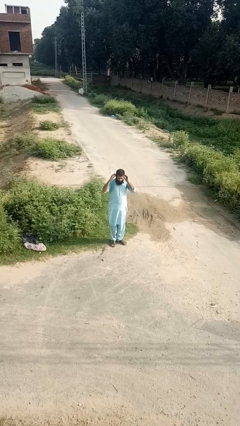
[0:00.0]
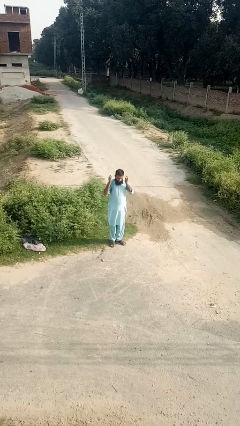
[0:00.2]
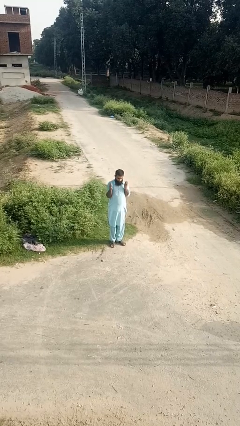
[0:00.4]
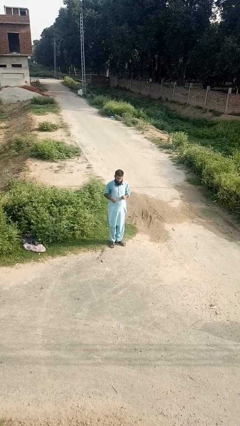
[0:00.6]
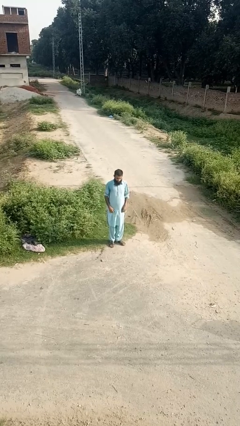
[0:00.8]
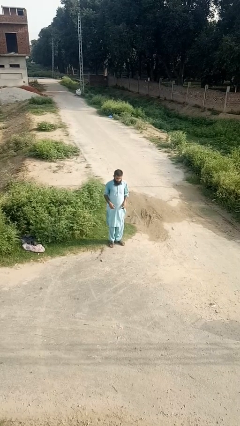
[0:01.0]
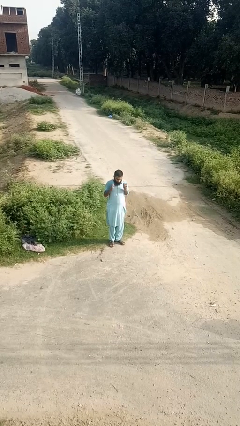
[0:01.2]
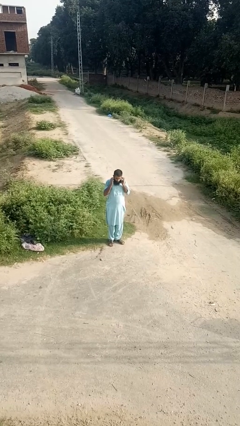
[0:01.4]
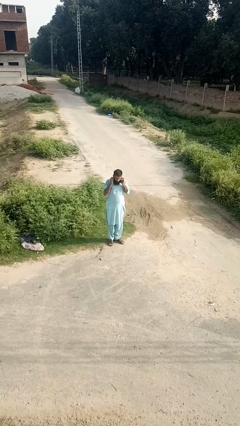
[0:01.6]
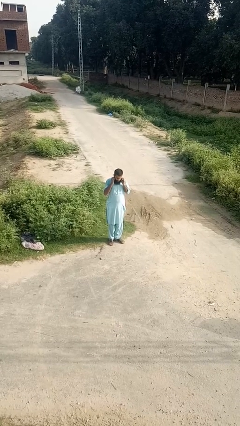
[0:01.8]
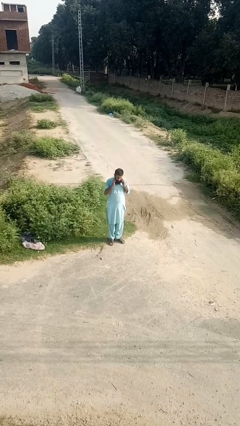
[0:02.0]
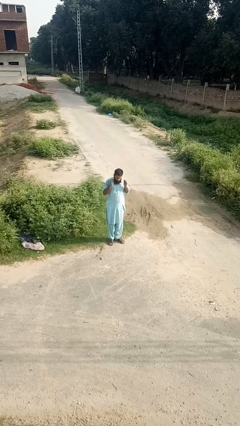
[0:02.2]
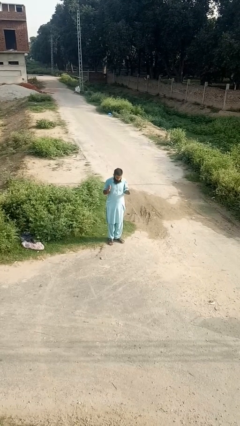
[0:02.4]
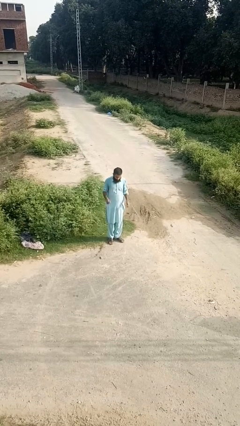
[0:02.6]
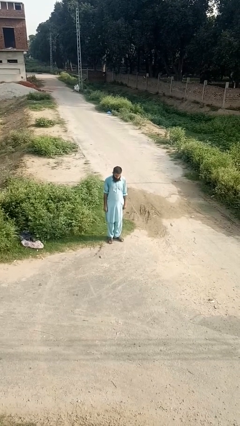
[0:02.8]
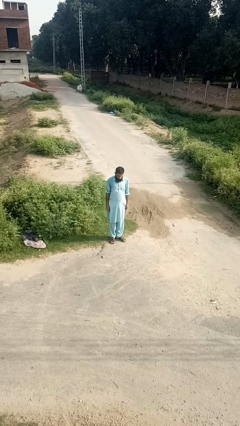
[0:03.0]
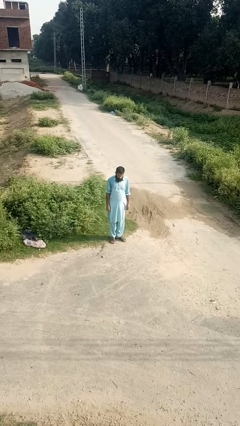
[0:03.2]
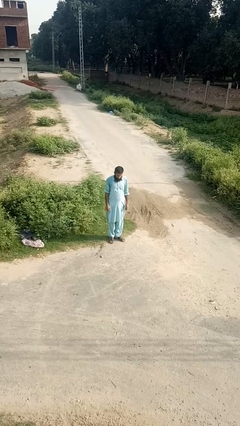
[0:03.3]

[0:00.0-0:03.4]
person takes off earrings

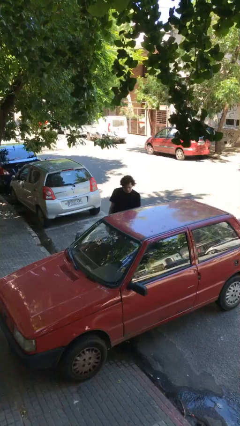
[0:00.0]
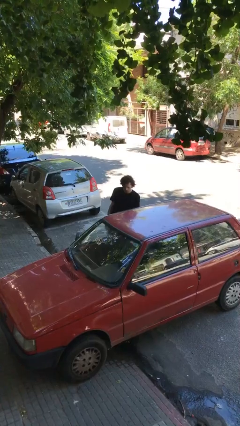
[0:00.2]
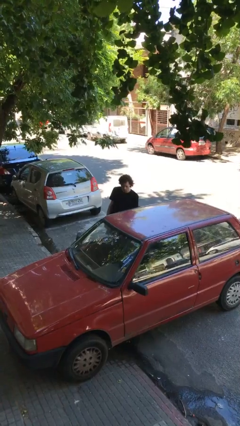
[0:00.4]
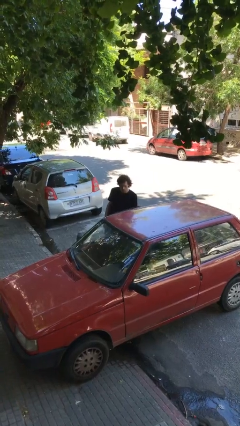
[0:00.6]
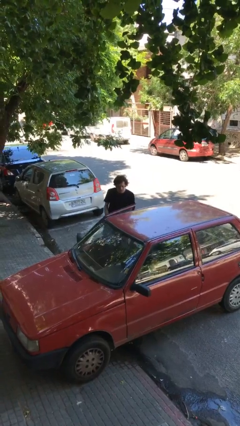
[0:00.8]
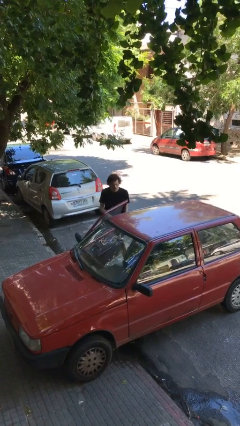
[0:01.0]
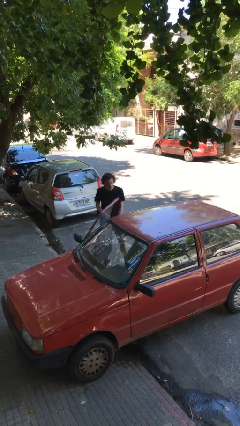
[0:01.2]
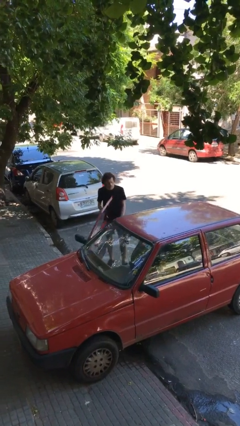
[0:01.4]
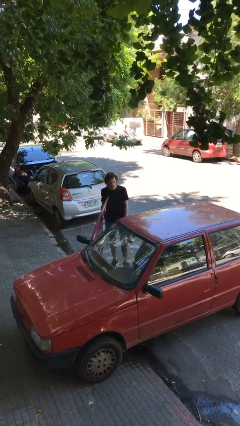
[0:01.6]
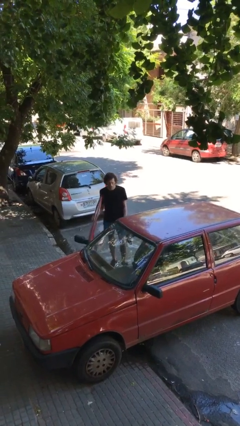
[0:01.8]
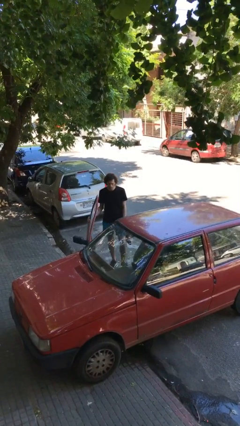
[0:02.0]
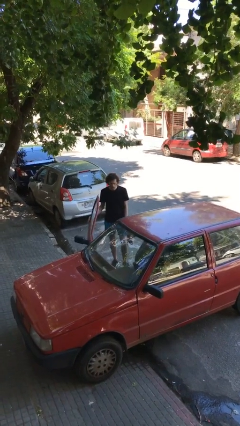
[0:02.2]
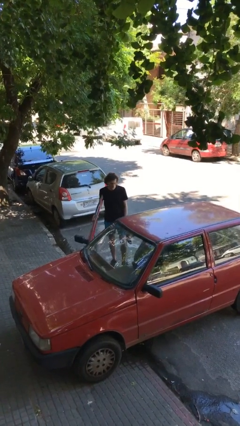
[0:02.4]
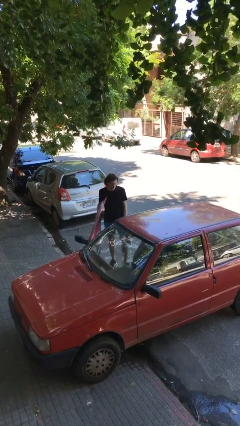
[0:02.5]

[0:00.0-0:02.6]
person opens car door

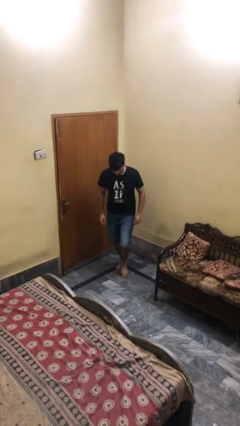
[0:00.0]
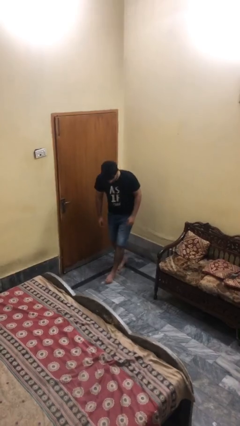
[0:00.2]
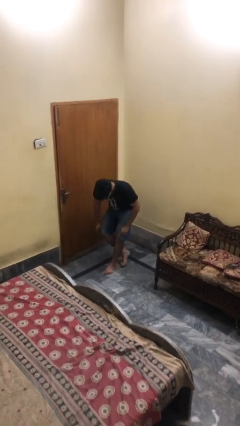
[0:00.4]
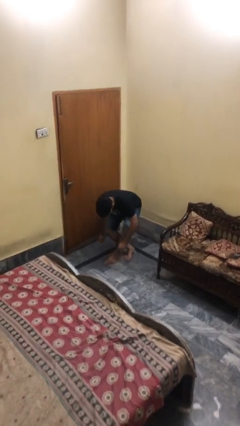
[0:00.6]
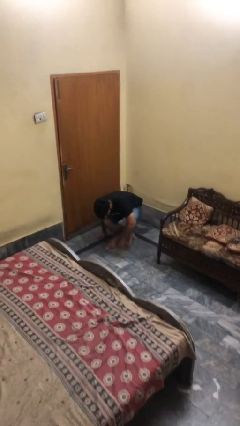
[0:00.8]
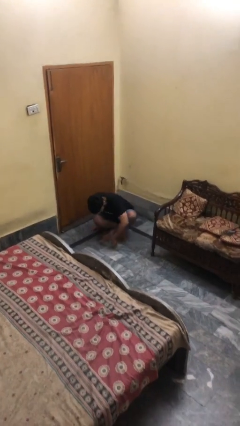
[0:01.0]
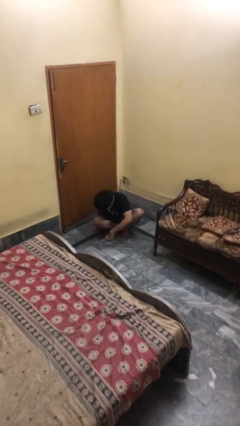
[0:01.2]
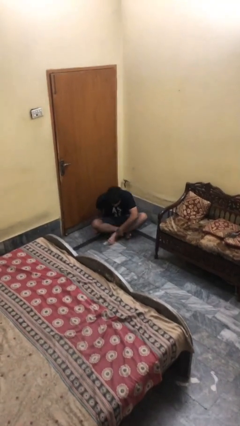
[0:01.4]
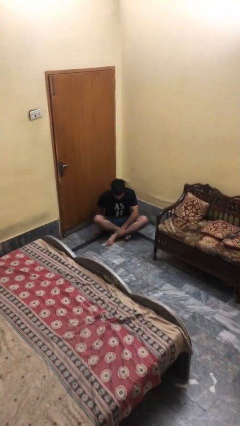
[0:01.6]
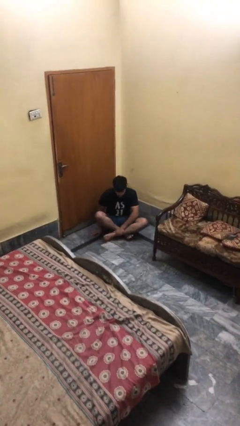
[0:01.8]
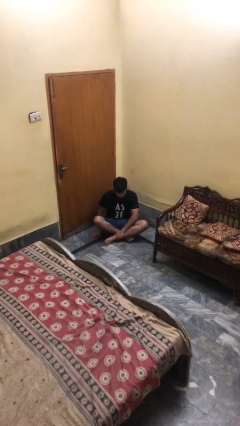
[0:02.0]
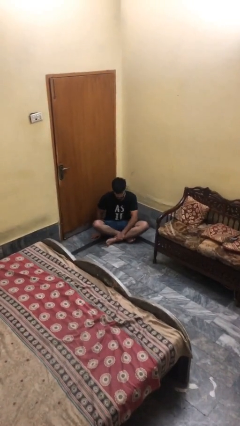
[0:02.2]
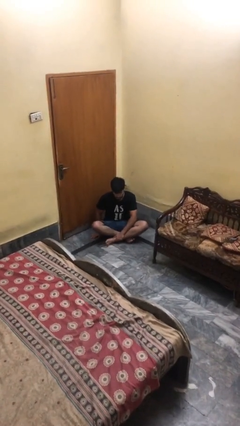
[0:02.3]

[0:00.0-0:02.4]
person sits crisscross

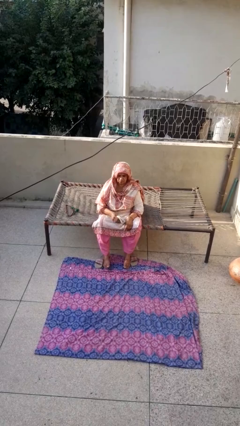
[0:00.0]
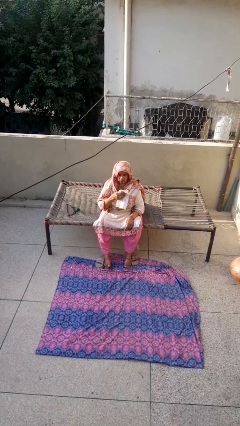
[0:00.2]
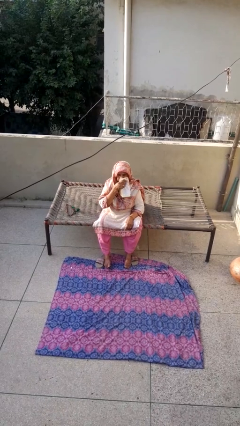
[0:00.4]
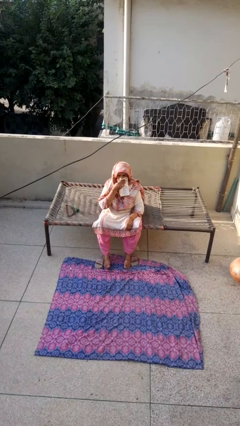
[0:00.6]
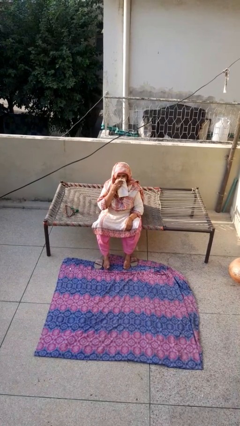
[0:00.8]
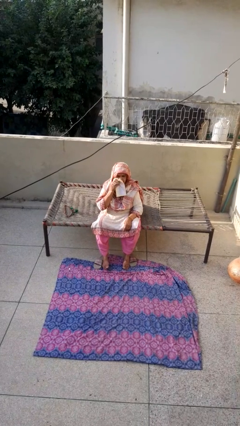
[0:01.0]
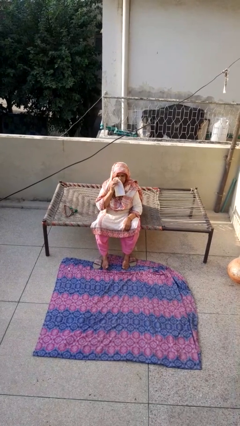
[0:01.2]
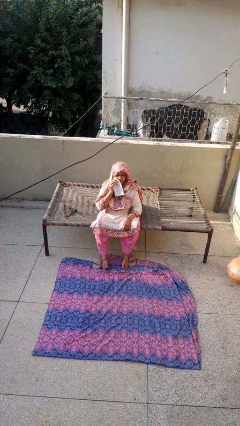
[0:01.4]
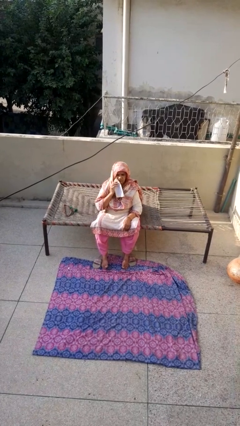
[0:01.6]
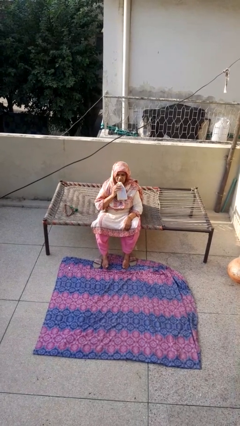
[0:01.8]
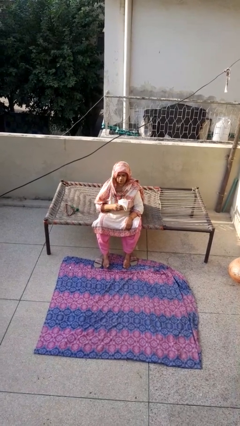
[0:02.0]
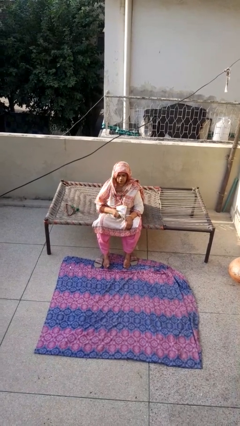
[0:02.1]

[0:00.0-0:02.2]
person wipes mouth with napkin

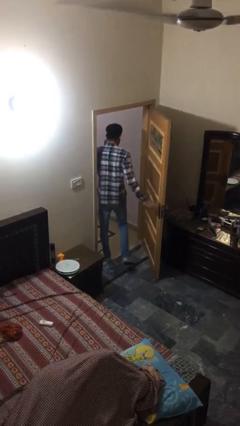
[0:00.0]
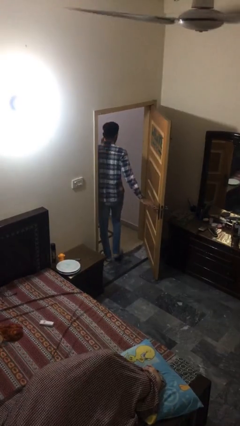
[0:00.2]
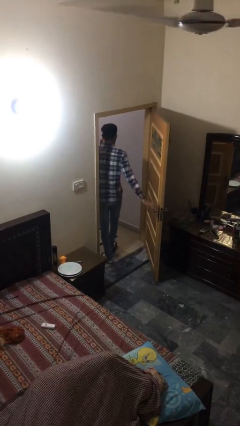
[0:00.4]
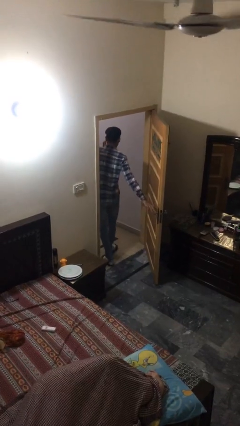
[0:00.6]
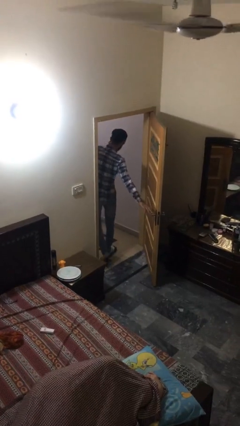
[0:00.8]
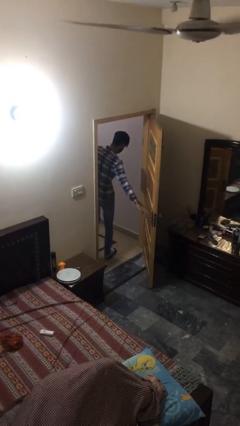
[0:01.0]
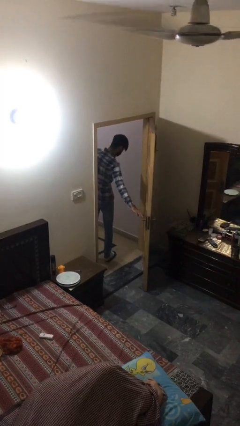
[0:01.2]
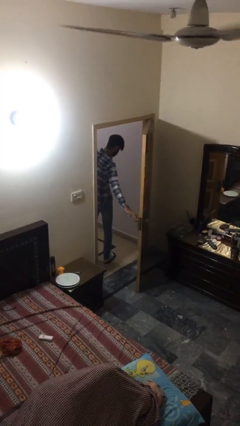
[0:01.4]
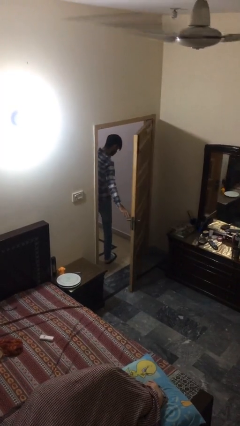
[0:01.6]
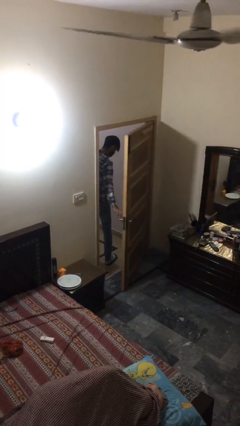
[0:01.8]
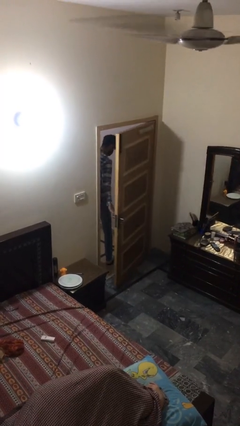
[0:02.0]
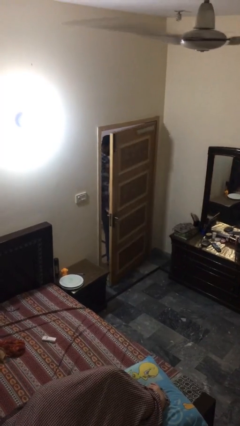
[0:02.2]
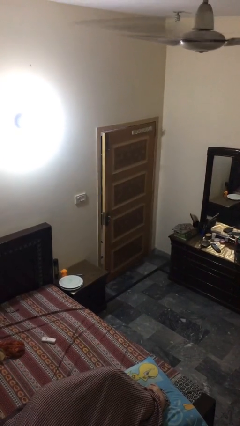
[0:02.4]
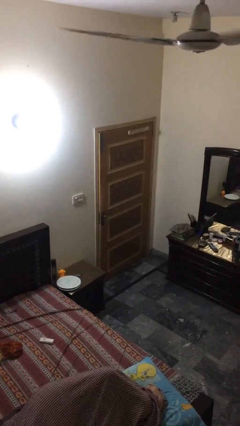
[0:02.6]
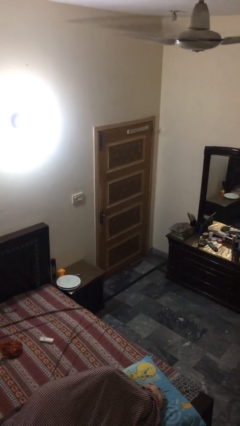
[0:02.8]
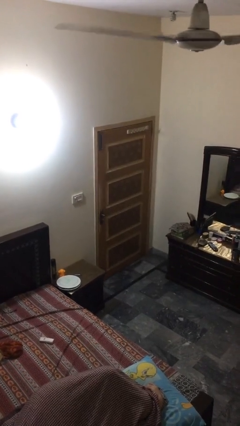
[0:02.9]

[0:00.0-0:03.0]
person closes facility door

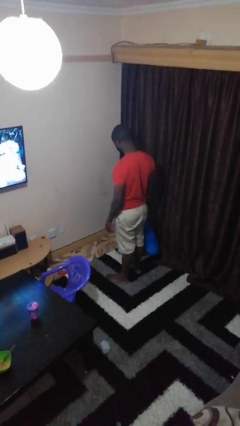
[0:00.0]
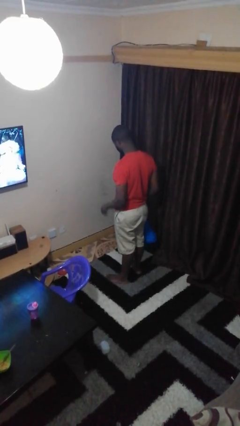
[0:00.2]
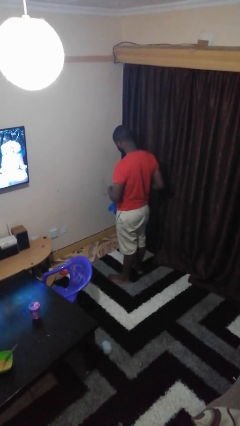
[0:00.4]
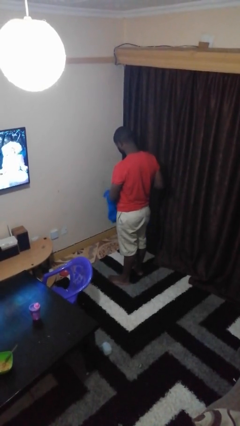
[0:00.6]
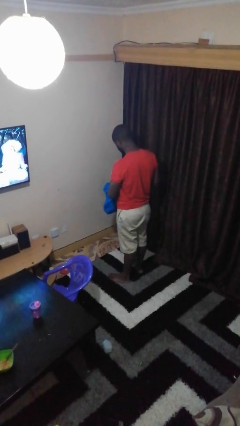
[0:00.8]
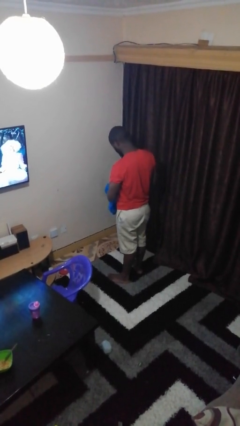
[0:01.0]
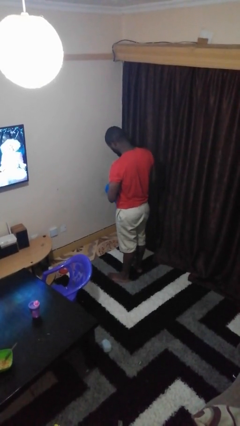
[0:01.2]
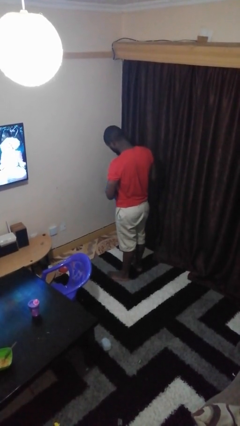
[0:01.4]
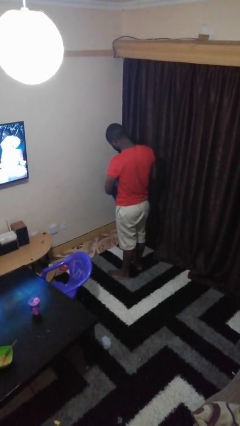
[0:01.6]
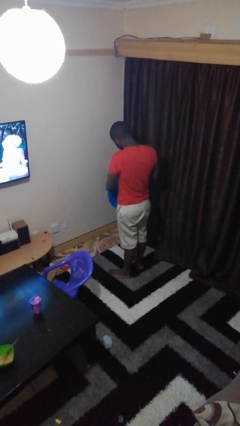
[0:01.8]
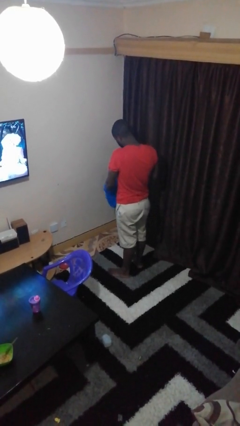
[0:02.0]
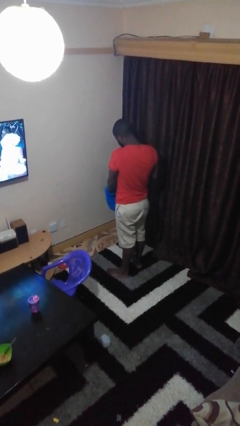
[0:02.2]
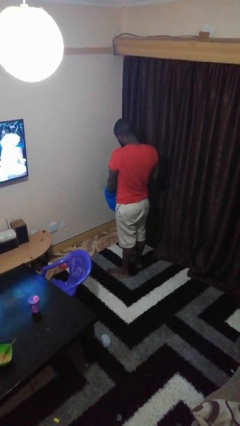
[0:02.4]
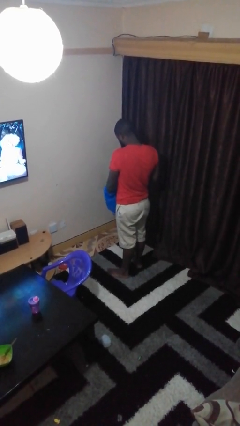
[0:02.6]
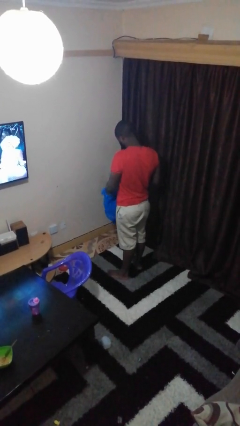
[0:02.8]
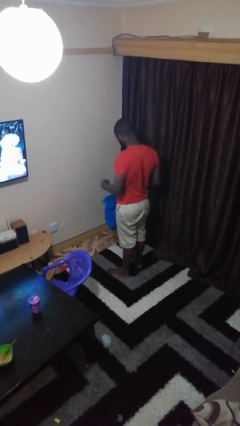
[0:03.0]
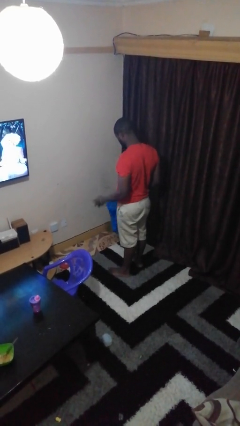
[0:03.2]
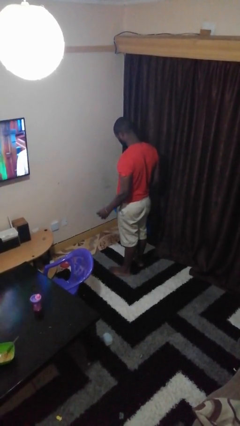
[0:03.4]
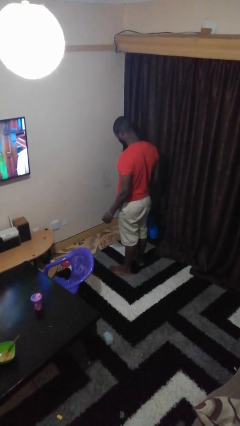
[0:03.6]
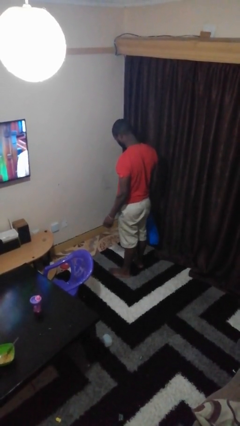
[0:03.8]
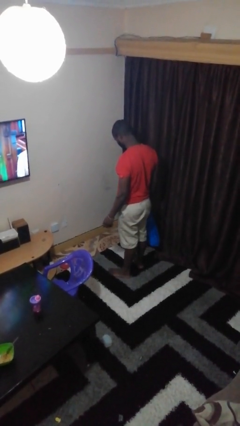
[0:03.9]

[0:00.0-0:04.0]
person takes object from bag
